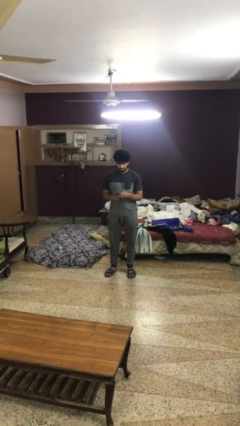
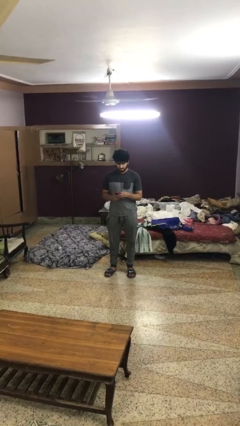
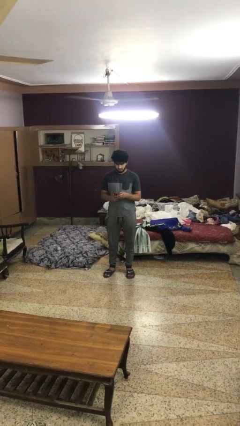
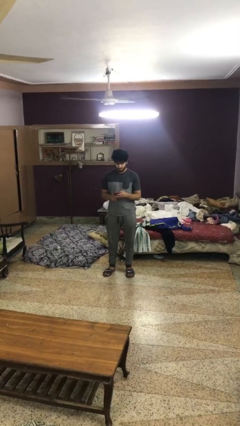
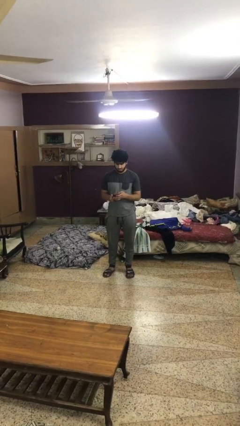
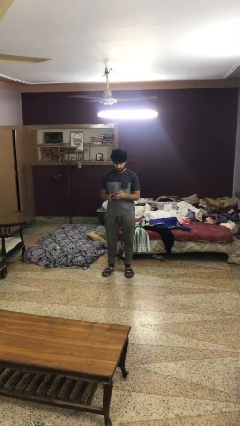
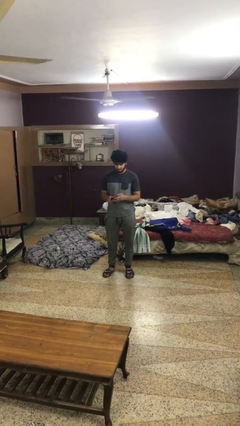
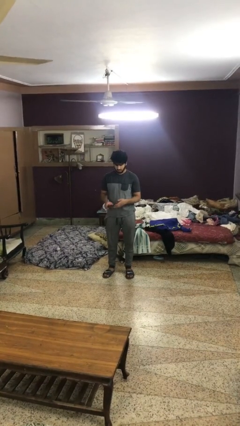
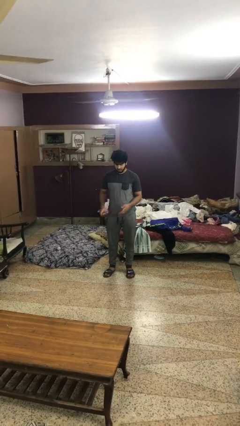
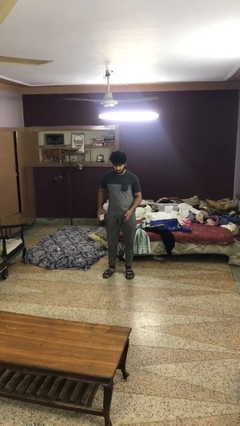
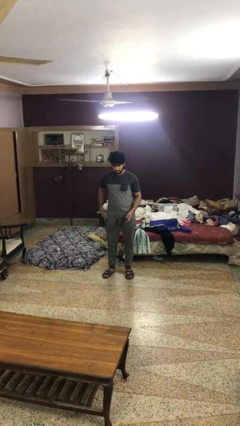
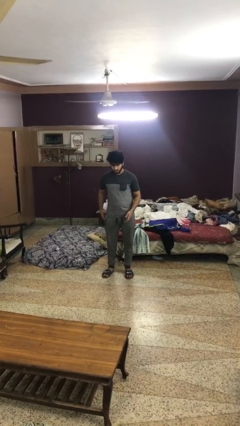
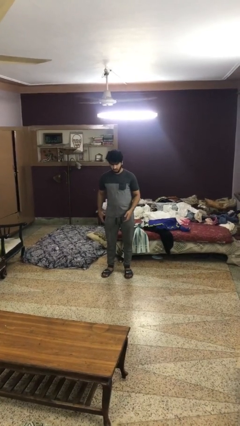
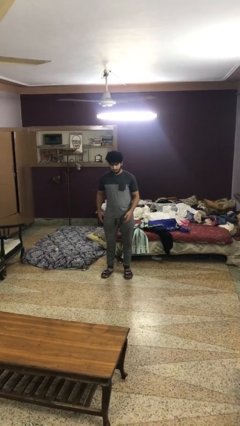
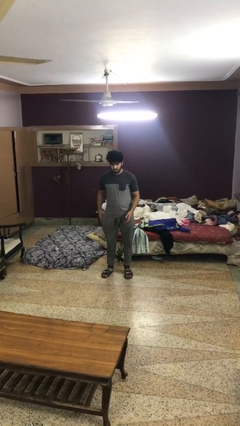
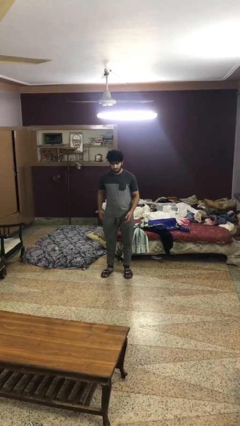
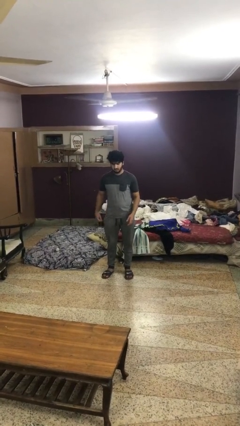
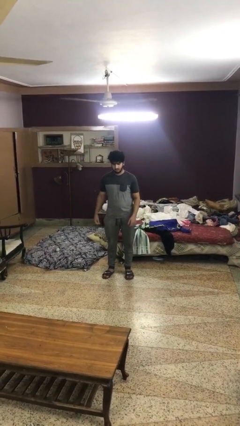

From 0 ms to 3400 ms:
person puts phone into pocket

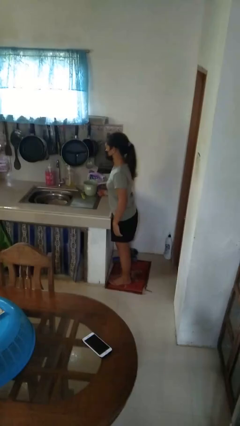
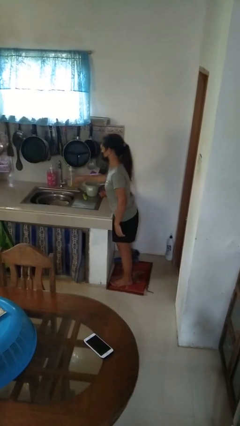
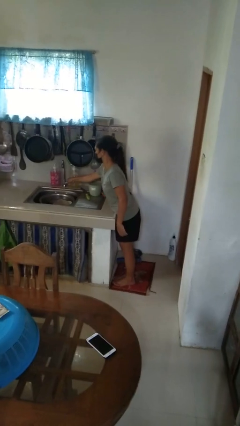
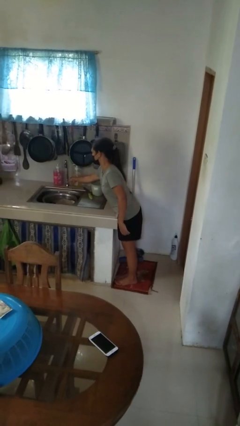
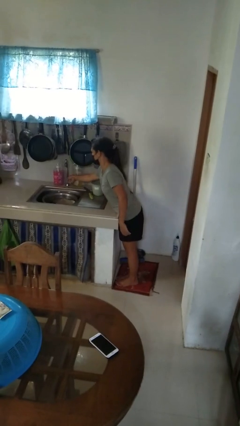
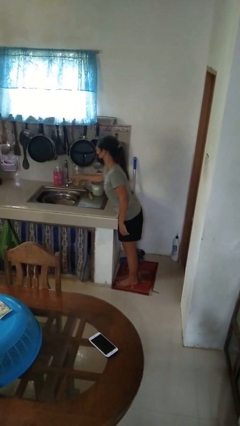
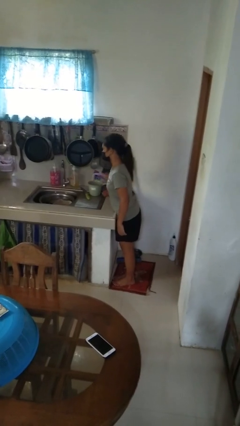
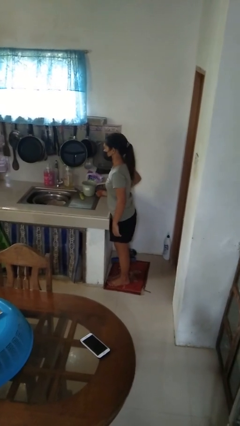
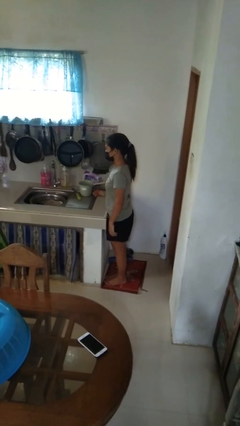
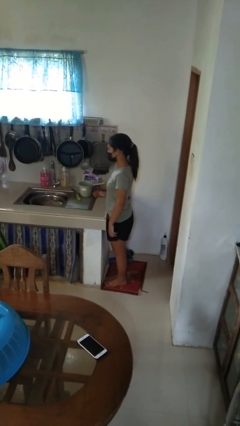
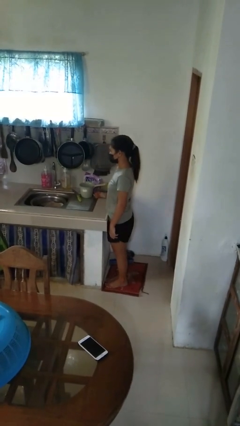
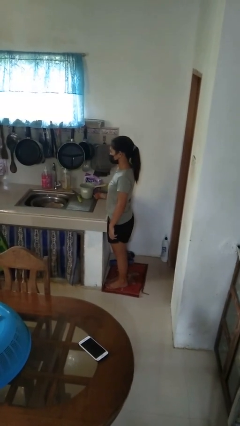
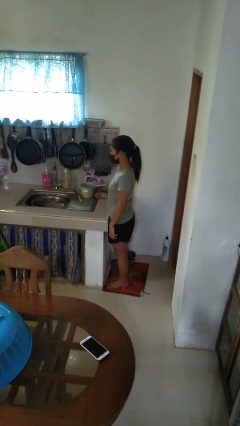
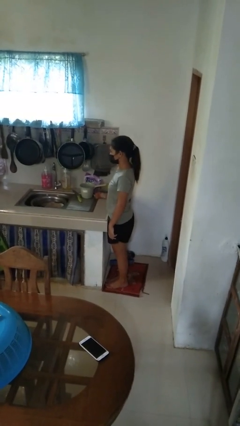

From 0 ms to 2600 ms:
person turns off faucet

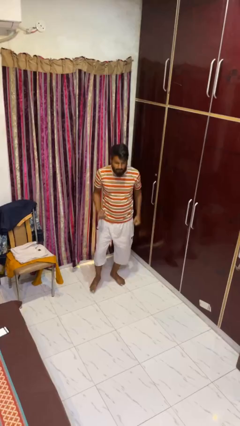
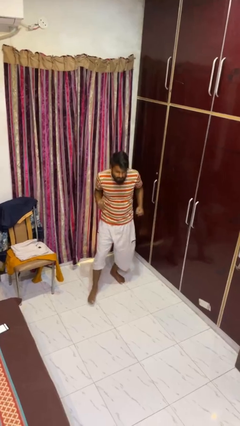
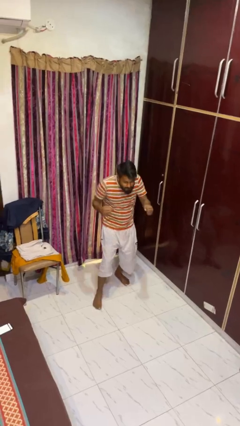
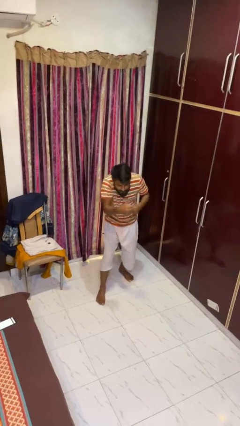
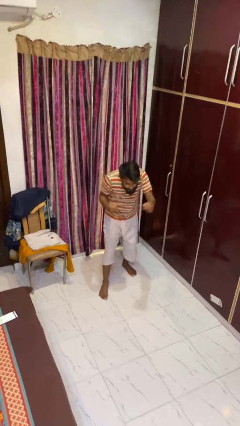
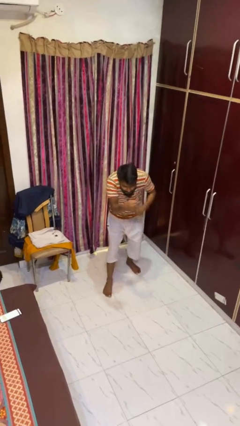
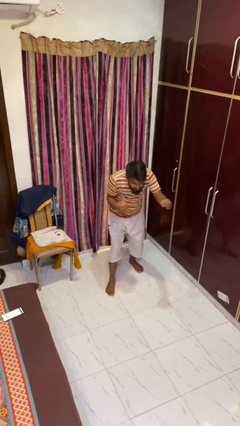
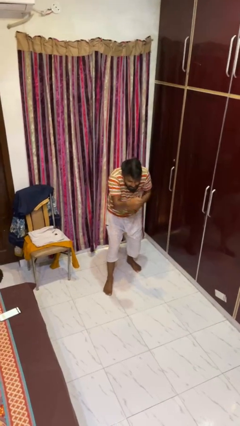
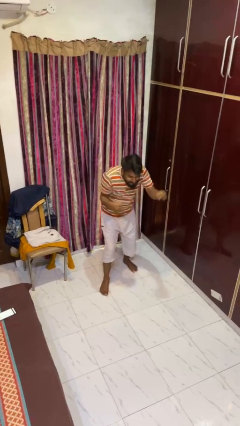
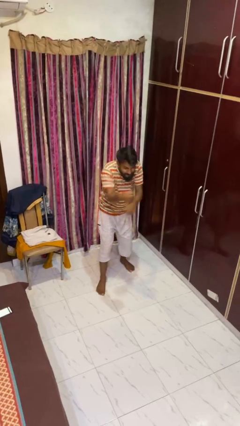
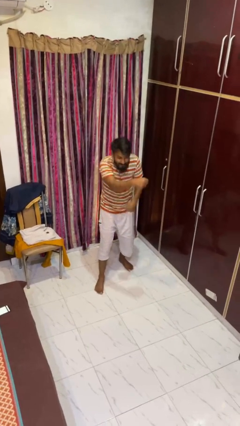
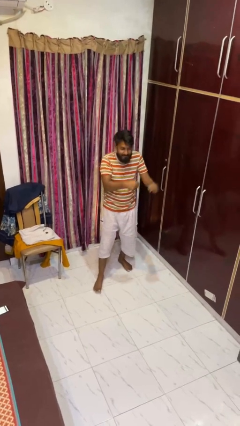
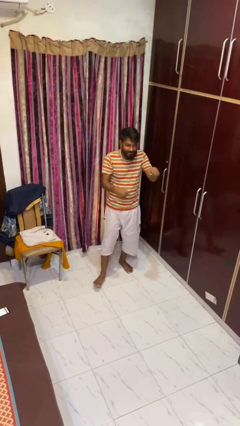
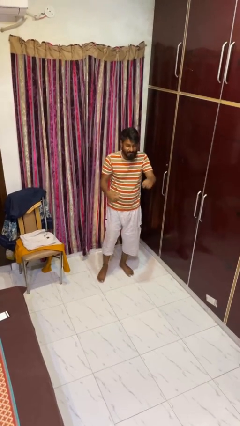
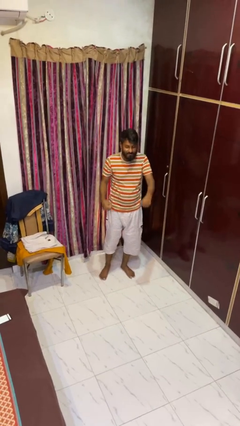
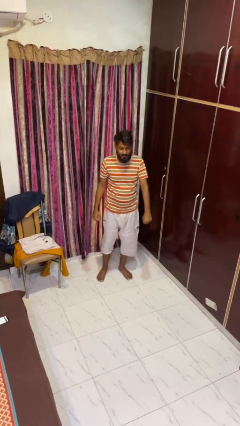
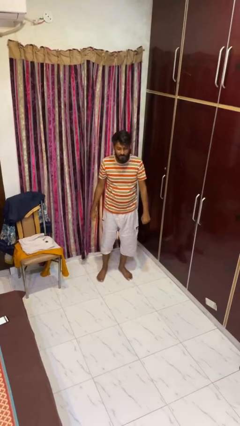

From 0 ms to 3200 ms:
person punches

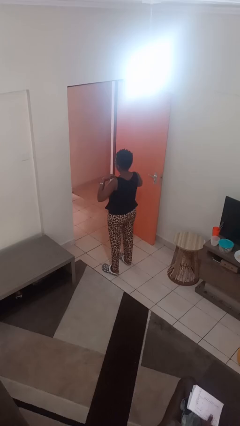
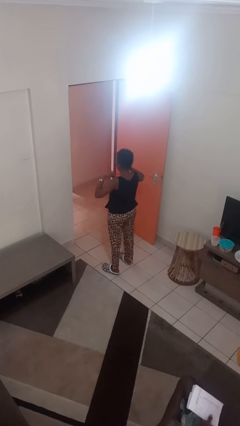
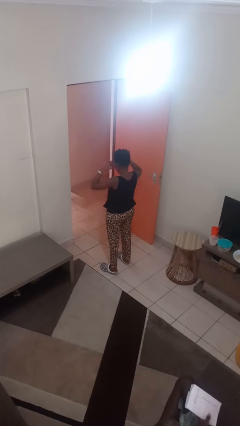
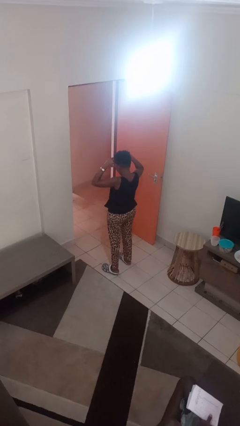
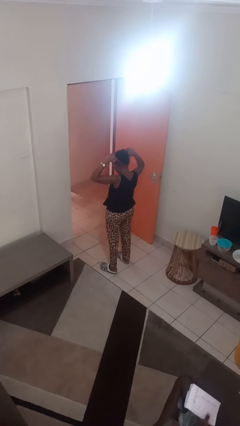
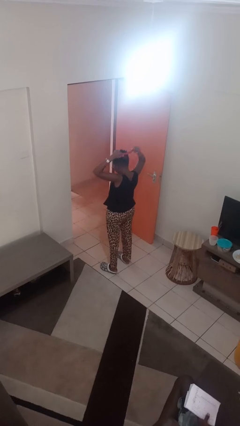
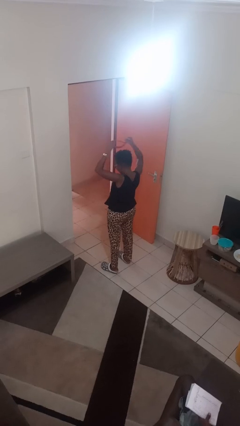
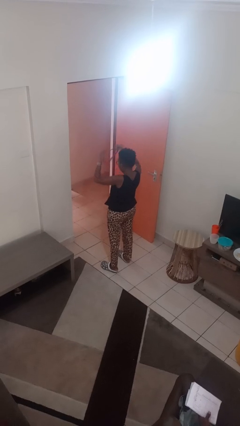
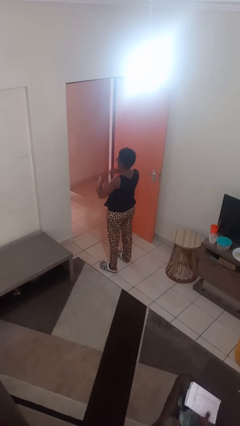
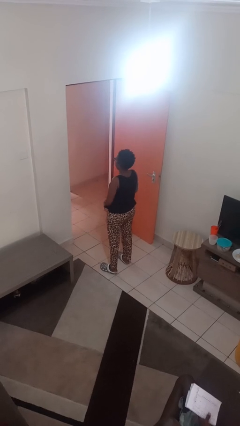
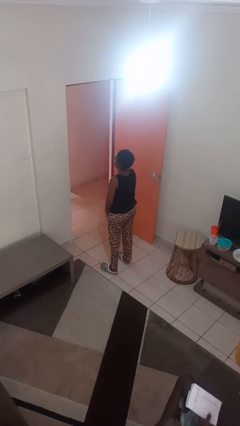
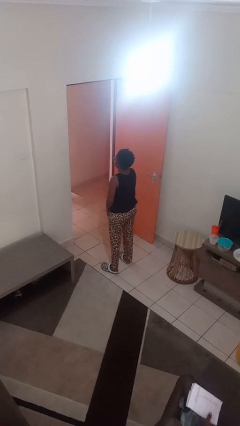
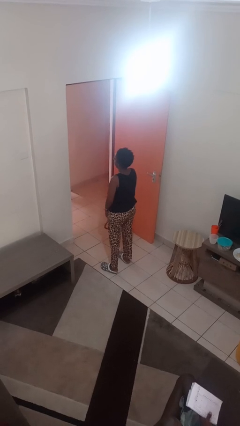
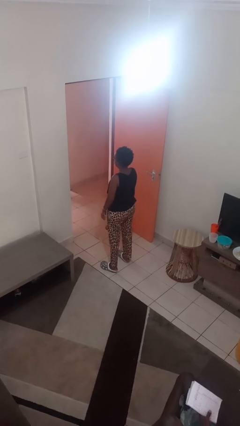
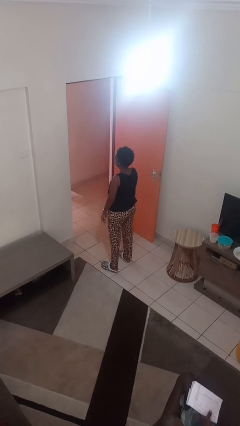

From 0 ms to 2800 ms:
person takes off necklace

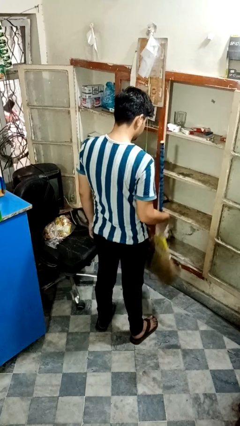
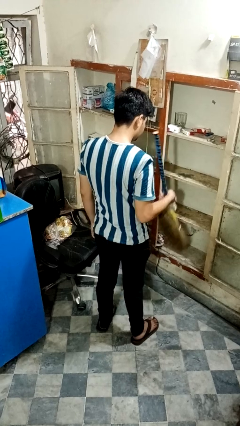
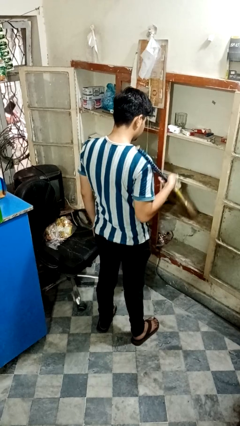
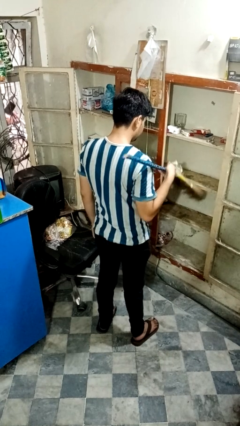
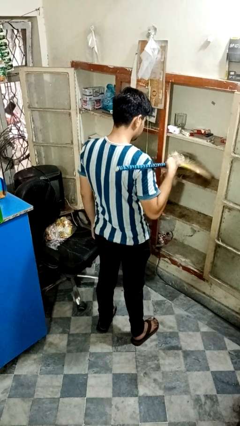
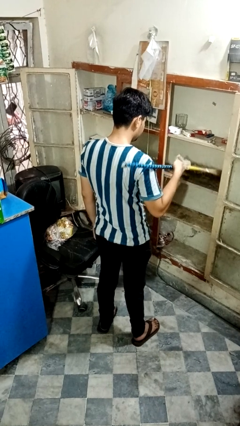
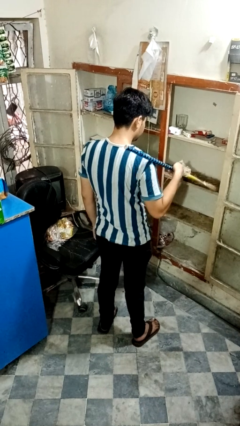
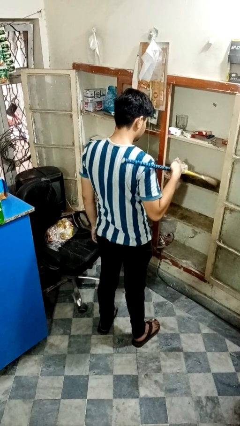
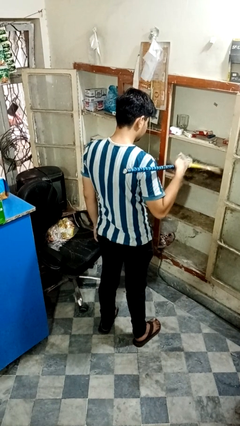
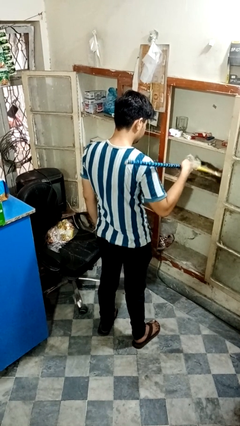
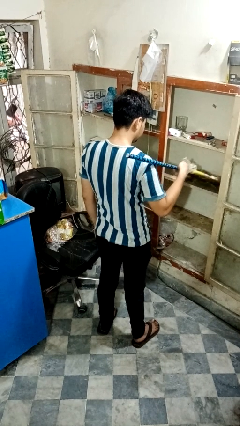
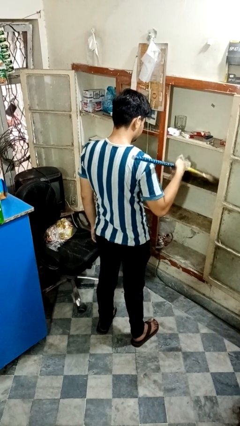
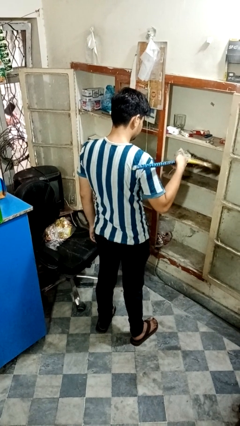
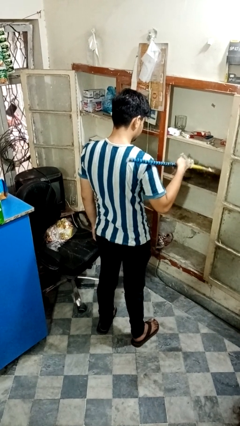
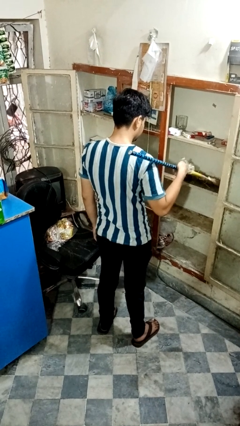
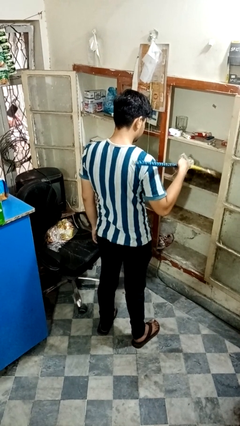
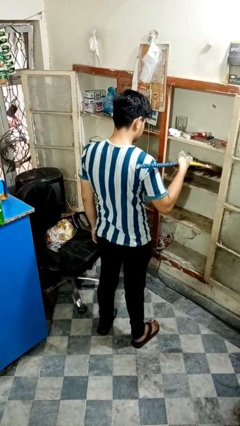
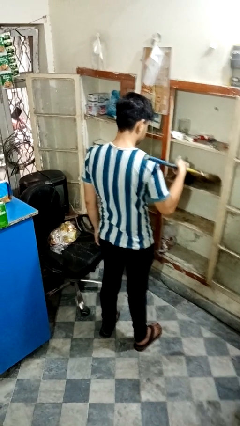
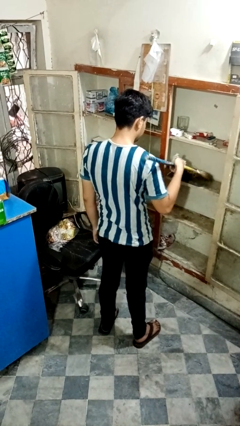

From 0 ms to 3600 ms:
person dusts furniture

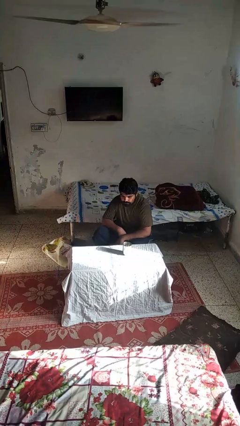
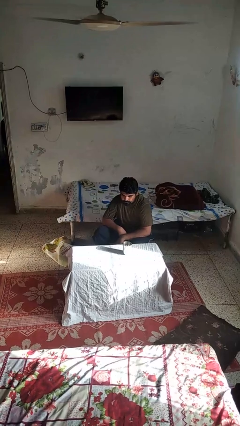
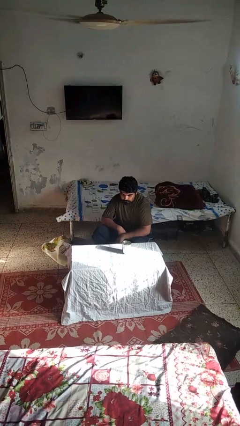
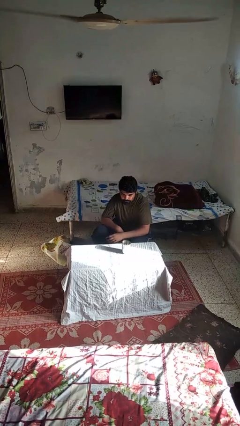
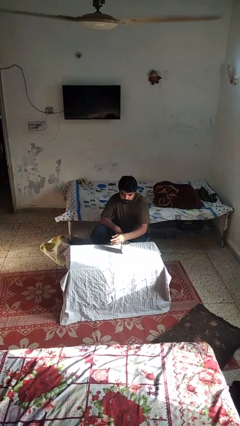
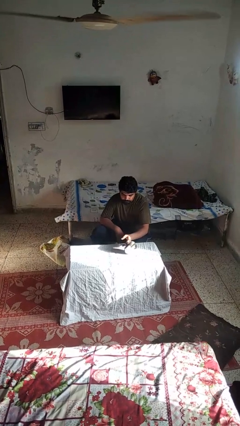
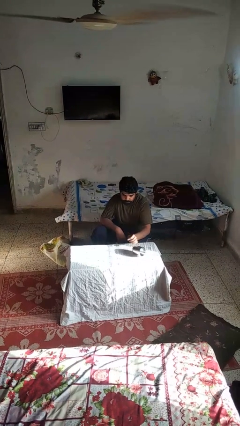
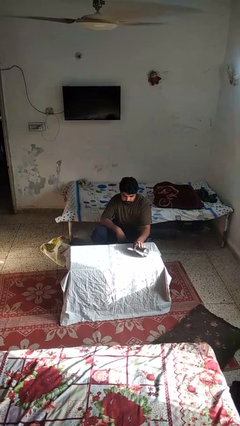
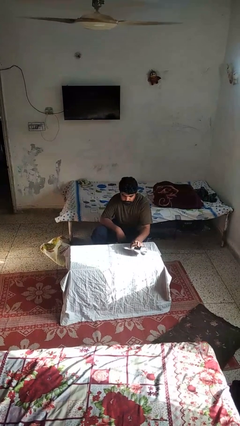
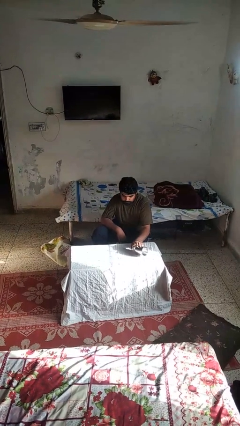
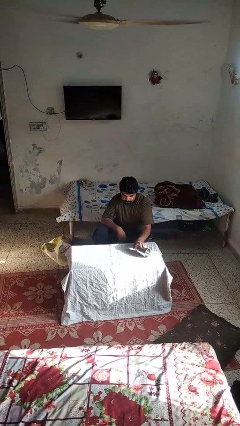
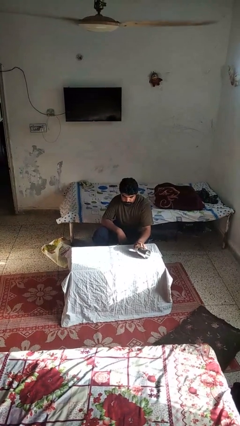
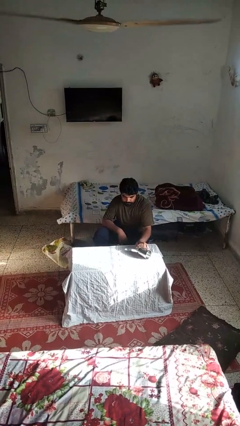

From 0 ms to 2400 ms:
person knocks over glass
